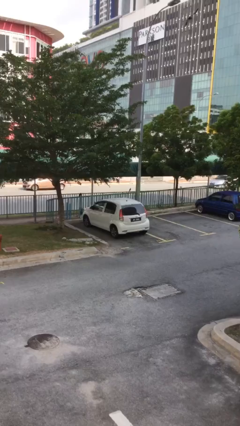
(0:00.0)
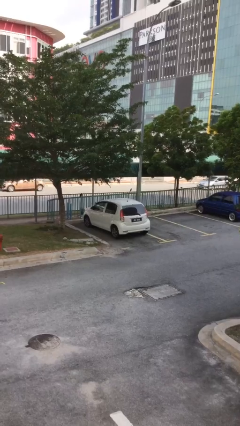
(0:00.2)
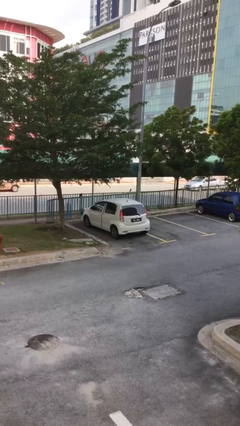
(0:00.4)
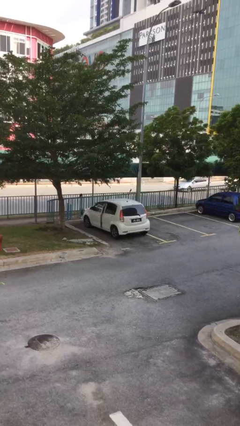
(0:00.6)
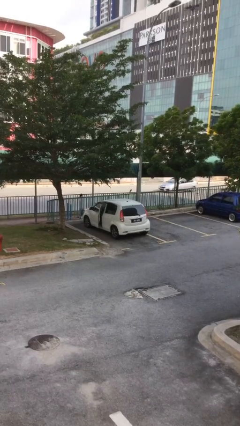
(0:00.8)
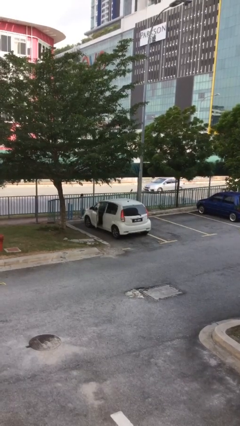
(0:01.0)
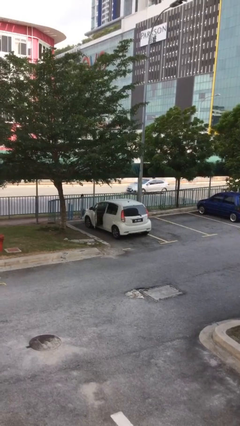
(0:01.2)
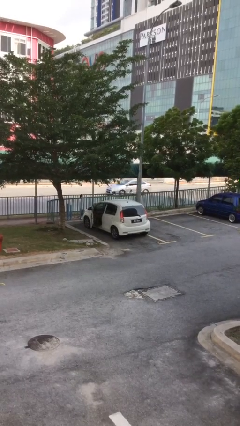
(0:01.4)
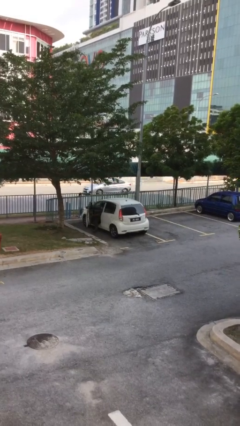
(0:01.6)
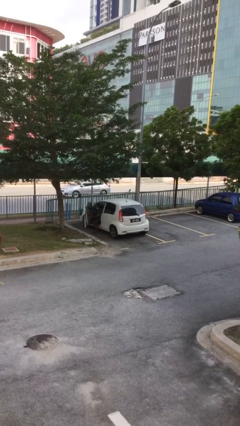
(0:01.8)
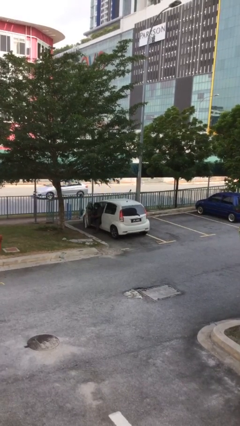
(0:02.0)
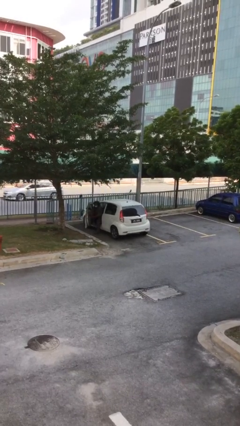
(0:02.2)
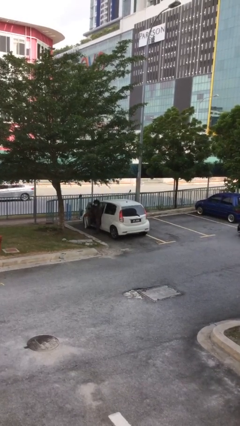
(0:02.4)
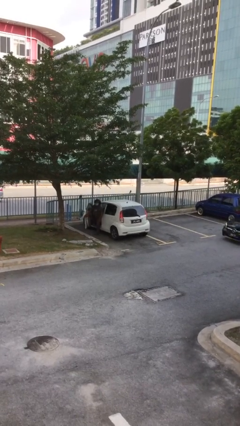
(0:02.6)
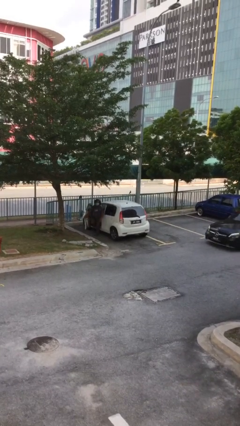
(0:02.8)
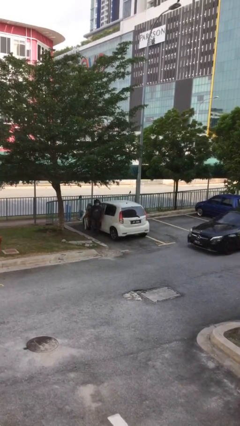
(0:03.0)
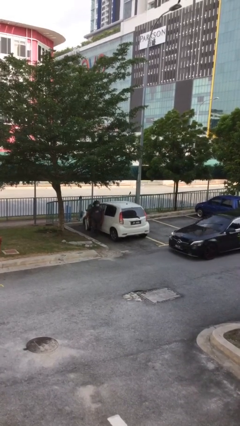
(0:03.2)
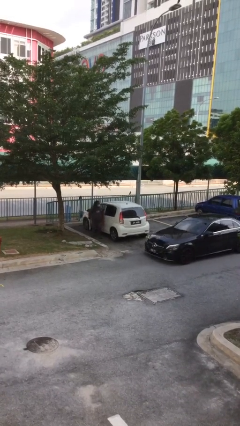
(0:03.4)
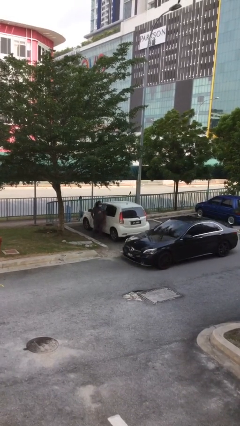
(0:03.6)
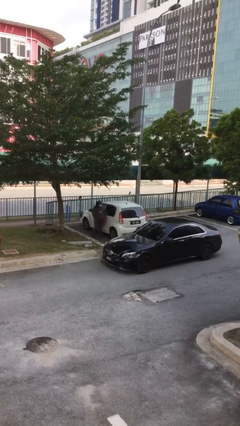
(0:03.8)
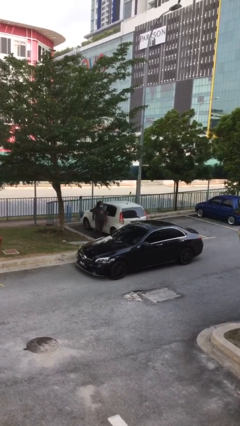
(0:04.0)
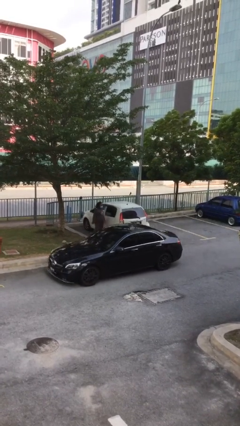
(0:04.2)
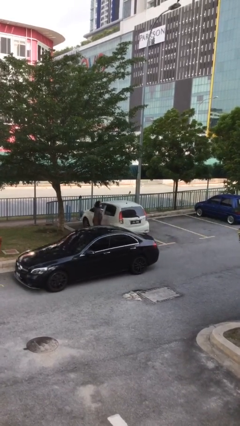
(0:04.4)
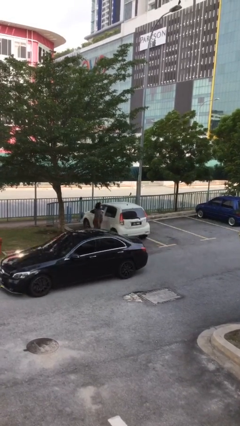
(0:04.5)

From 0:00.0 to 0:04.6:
car drops off person

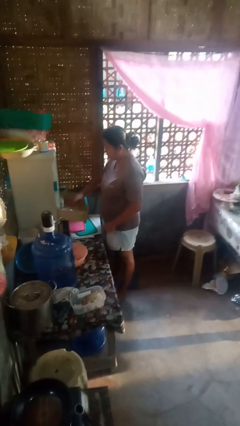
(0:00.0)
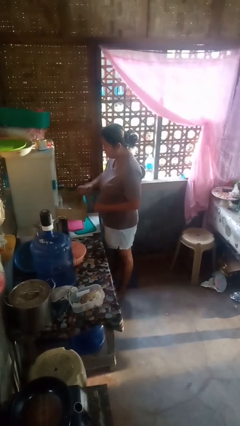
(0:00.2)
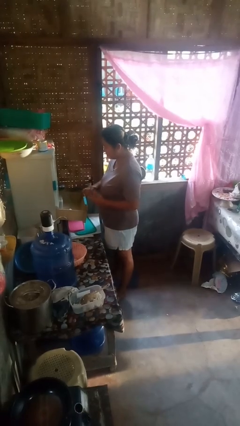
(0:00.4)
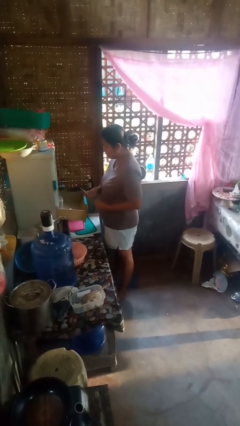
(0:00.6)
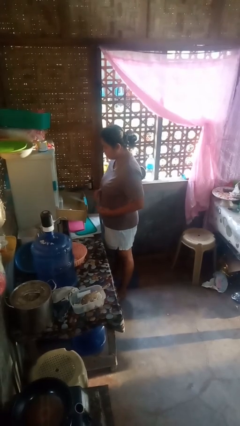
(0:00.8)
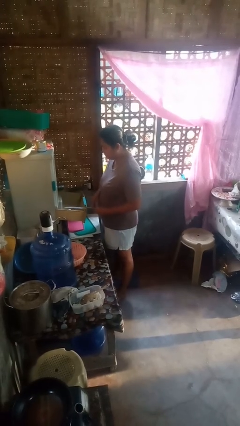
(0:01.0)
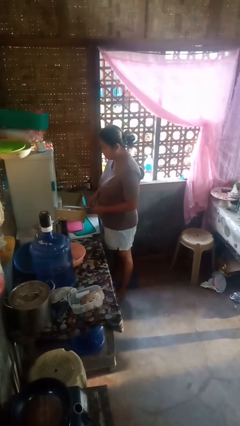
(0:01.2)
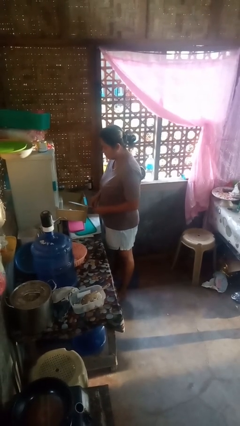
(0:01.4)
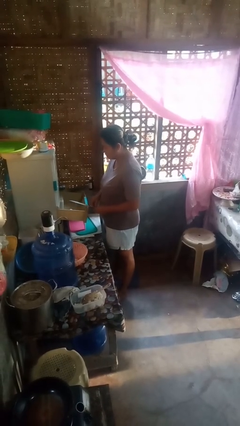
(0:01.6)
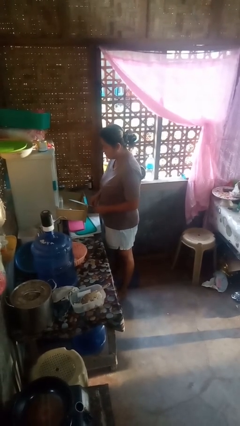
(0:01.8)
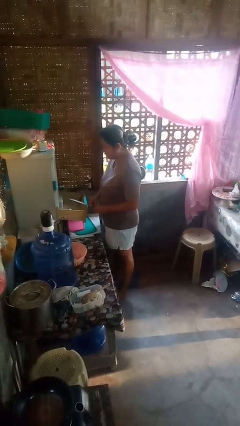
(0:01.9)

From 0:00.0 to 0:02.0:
person takes object from kitchen drawer

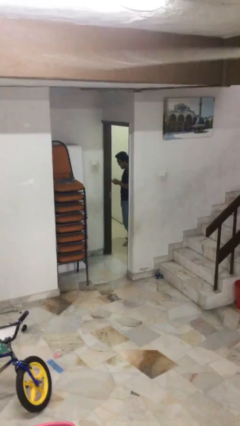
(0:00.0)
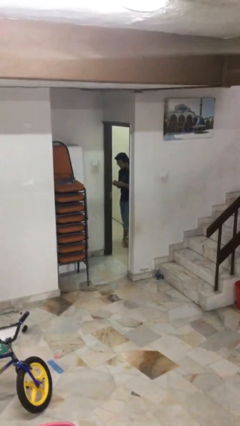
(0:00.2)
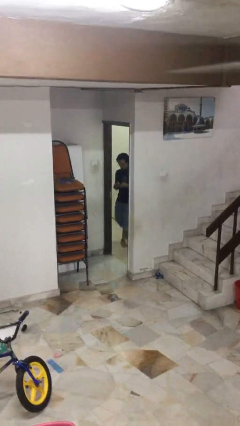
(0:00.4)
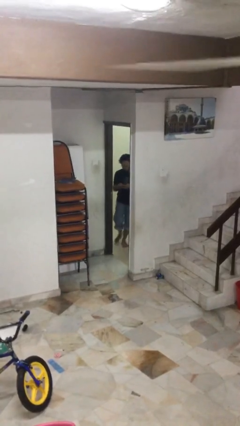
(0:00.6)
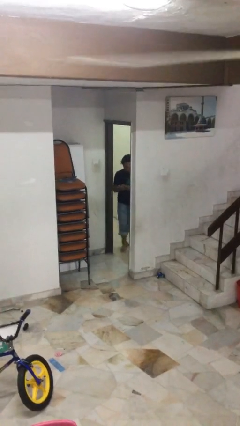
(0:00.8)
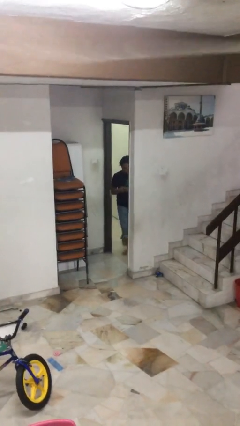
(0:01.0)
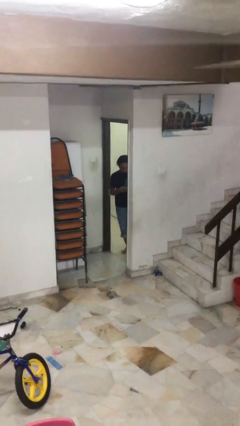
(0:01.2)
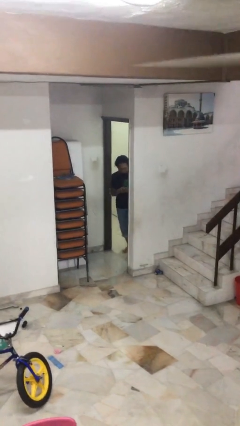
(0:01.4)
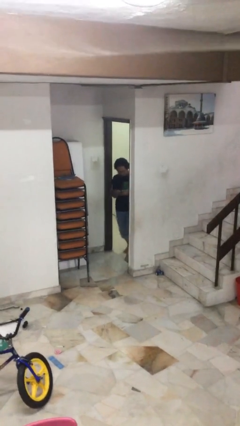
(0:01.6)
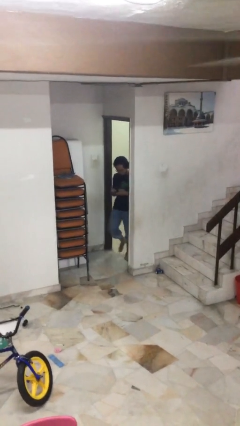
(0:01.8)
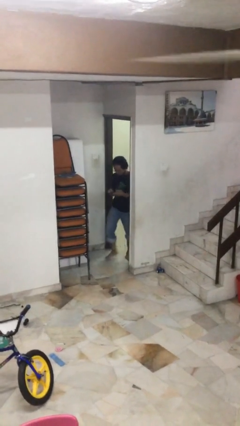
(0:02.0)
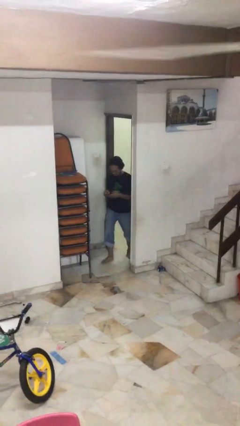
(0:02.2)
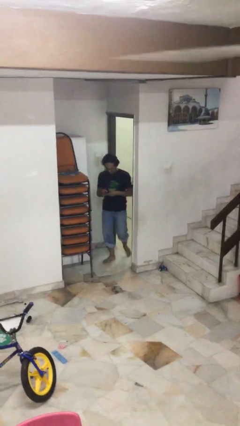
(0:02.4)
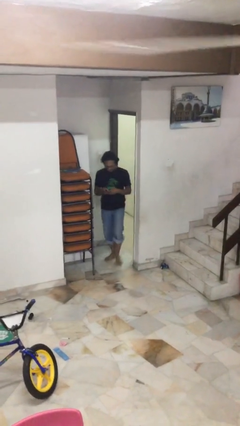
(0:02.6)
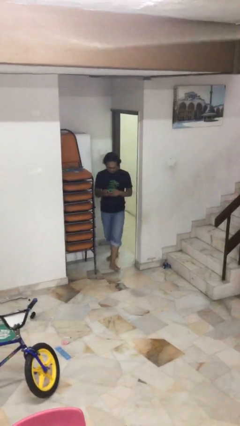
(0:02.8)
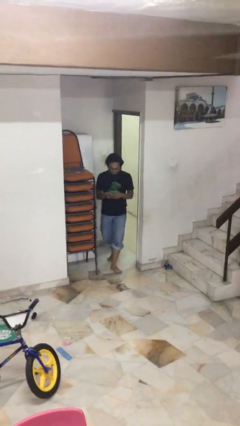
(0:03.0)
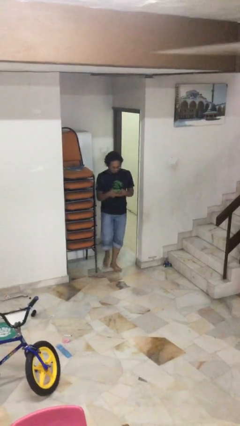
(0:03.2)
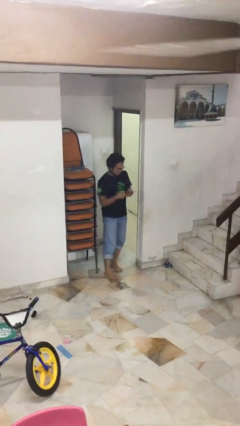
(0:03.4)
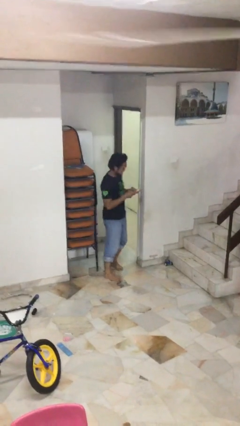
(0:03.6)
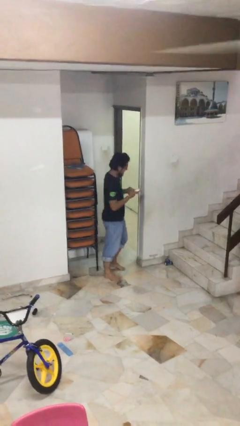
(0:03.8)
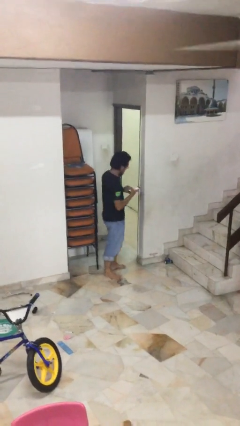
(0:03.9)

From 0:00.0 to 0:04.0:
person enters scene through structure

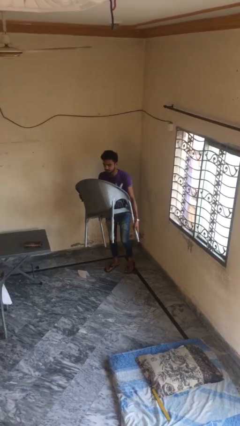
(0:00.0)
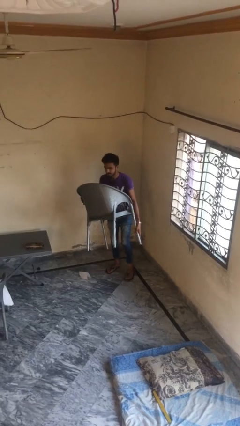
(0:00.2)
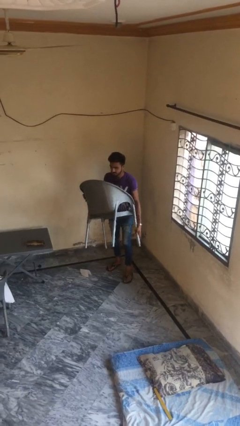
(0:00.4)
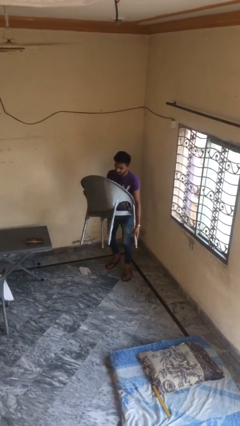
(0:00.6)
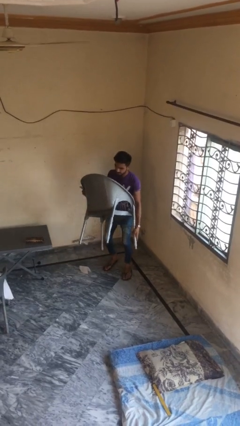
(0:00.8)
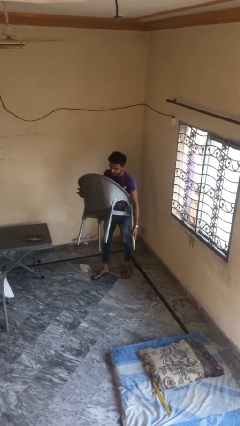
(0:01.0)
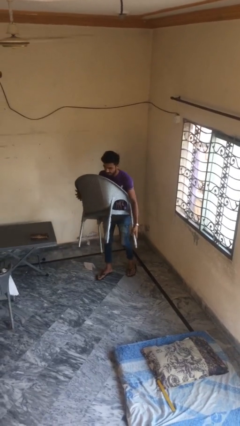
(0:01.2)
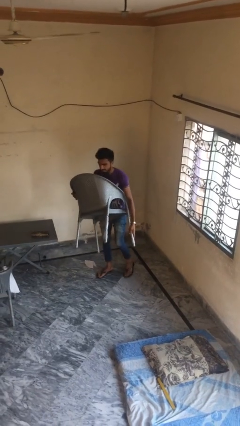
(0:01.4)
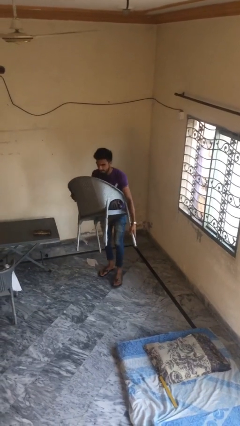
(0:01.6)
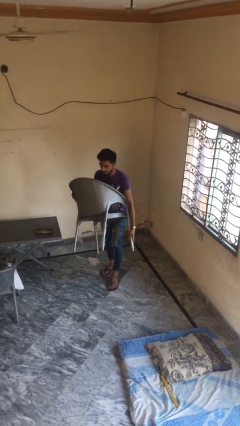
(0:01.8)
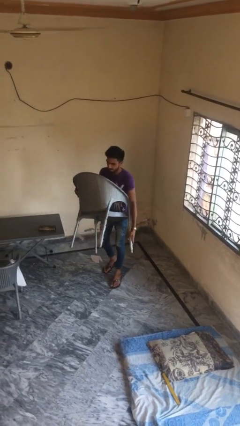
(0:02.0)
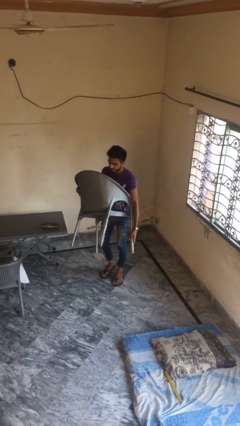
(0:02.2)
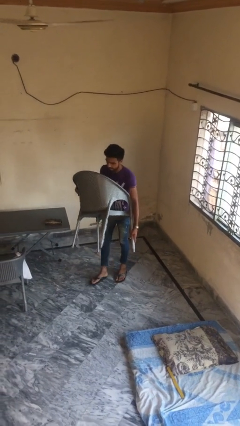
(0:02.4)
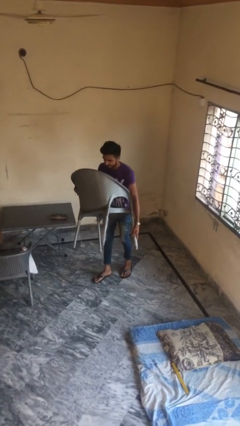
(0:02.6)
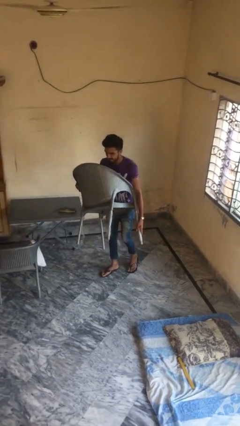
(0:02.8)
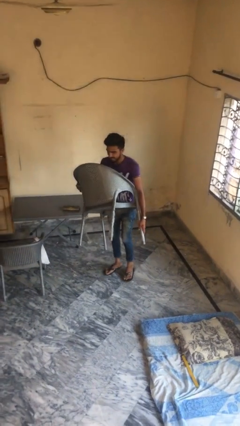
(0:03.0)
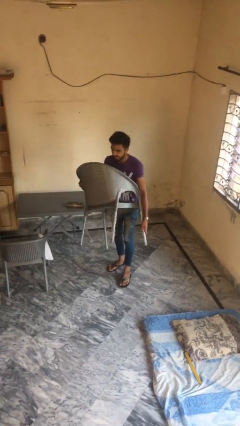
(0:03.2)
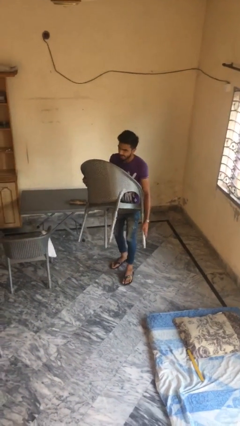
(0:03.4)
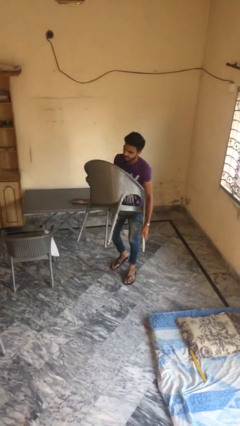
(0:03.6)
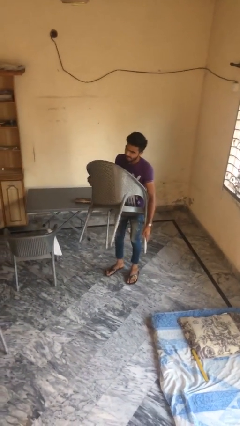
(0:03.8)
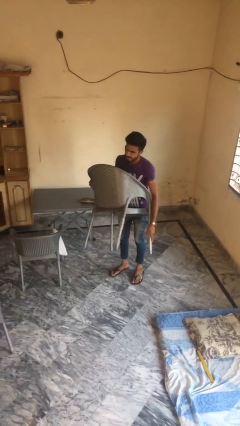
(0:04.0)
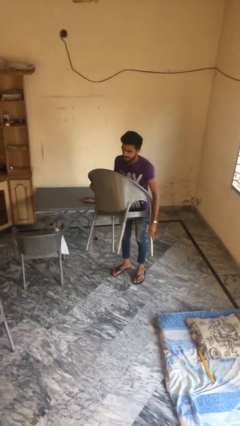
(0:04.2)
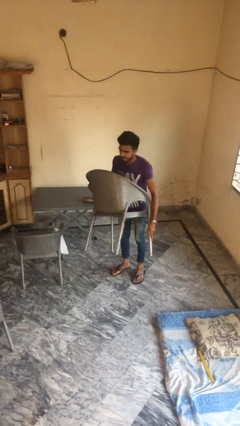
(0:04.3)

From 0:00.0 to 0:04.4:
person carries heavy object

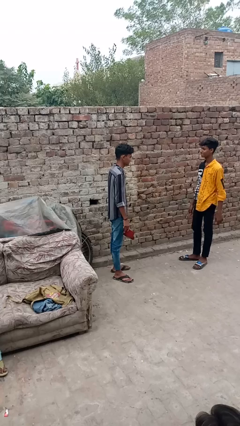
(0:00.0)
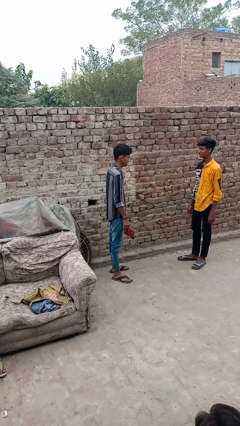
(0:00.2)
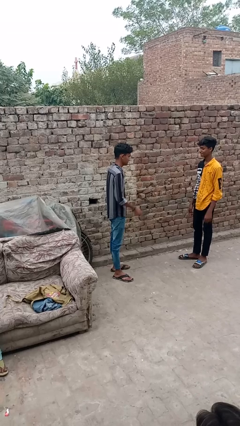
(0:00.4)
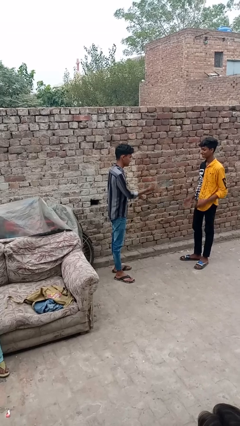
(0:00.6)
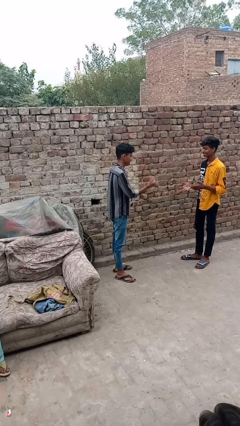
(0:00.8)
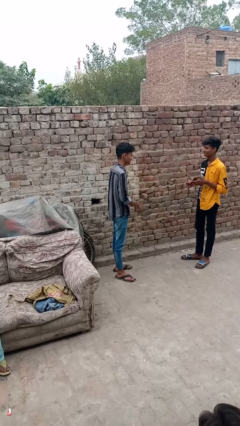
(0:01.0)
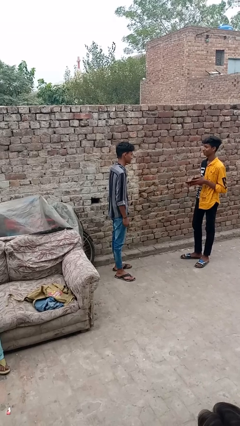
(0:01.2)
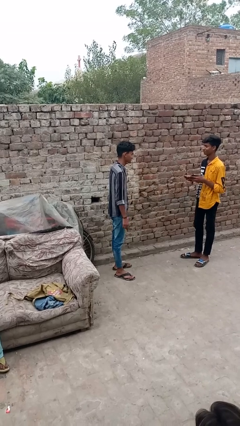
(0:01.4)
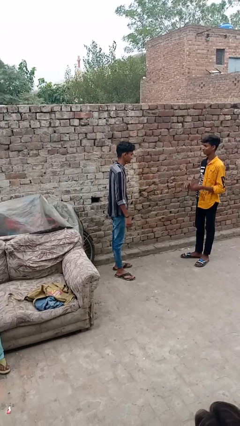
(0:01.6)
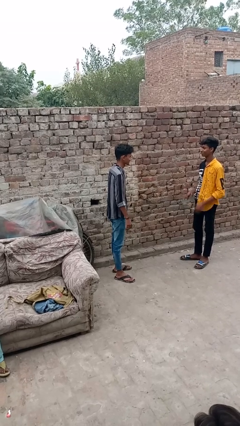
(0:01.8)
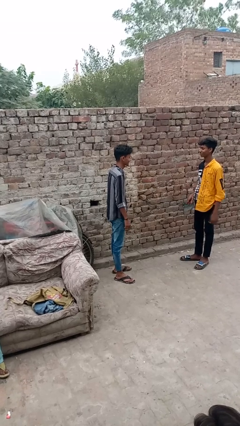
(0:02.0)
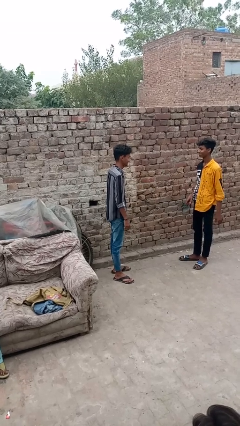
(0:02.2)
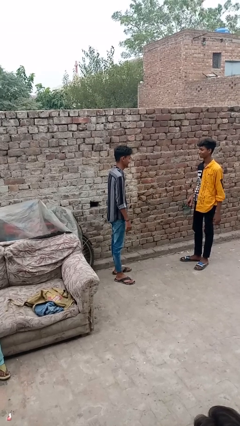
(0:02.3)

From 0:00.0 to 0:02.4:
person throws object to person

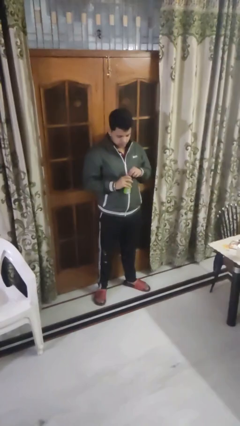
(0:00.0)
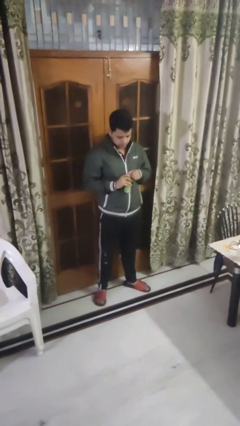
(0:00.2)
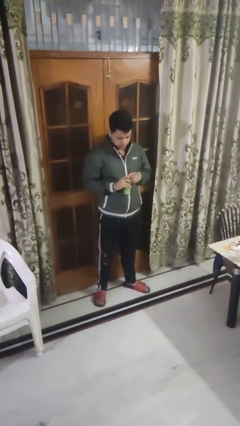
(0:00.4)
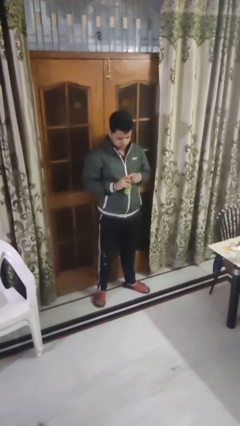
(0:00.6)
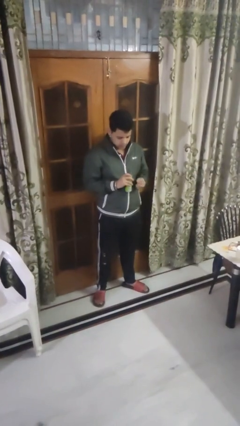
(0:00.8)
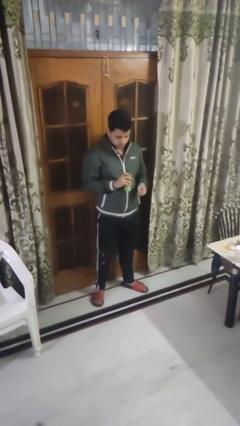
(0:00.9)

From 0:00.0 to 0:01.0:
person opens beverage can
